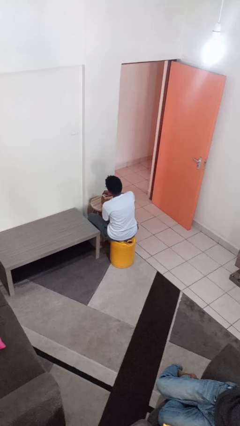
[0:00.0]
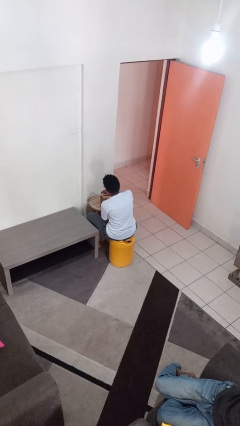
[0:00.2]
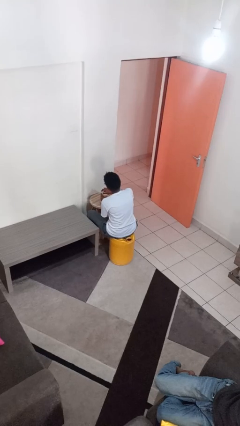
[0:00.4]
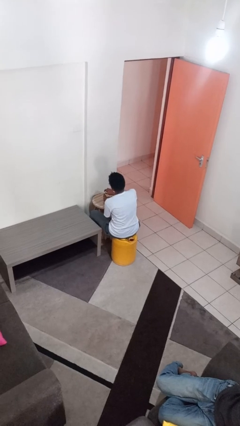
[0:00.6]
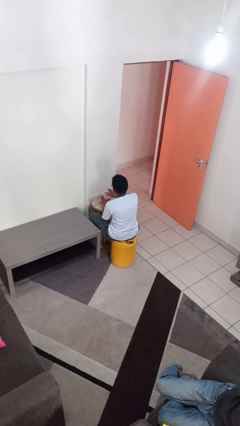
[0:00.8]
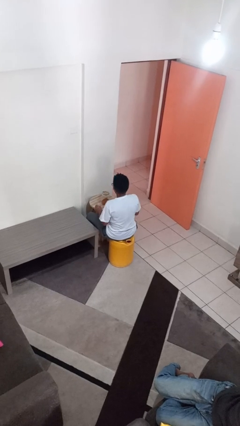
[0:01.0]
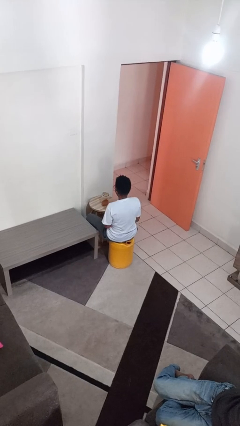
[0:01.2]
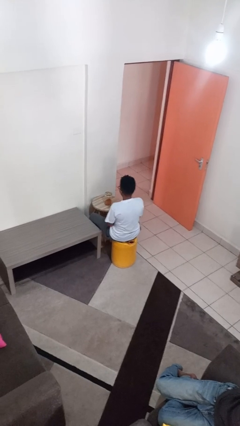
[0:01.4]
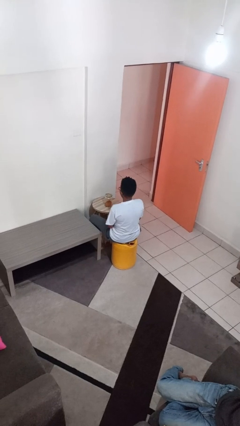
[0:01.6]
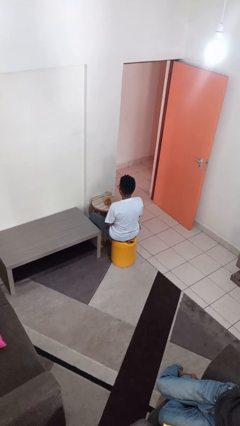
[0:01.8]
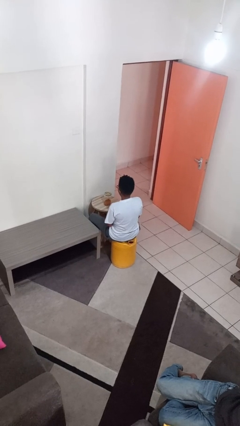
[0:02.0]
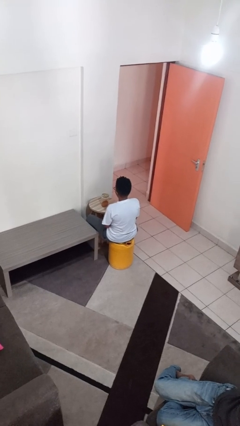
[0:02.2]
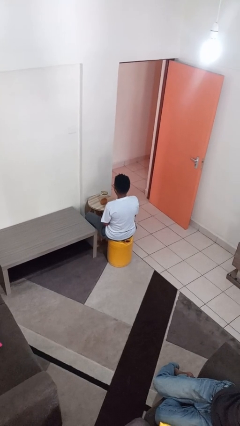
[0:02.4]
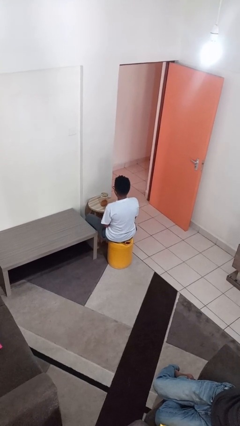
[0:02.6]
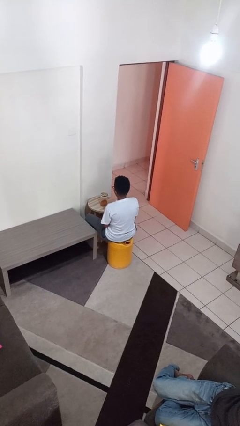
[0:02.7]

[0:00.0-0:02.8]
person closes jar

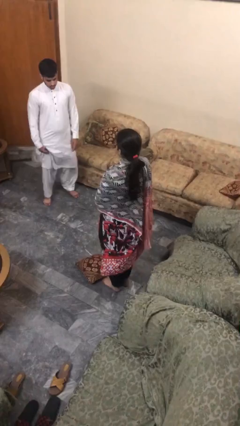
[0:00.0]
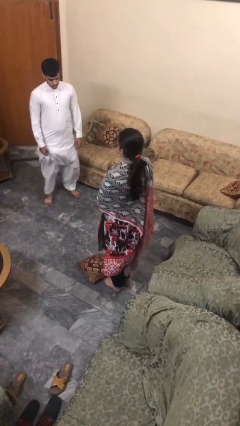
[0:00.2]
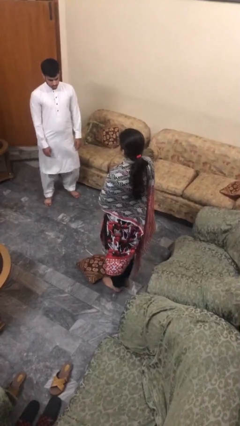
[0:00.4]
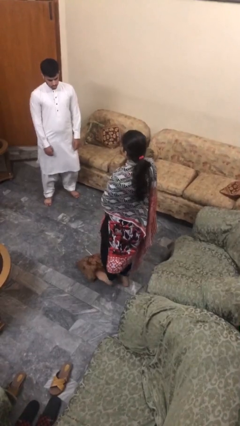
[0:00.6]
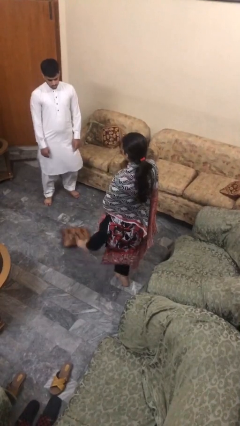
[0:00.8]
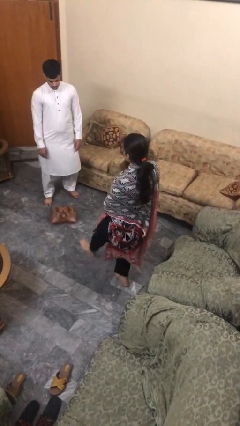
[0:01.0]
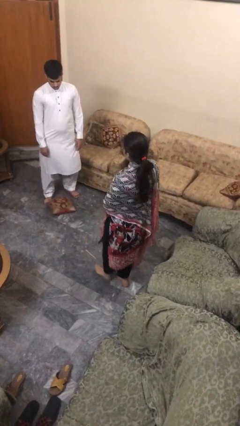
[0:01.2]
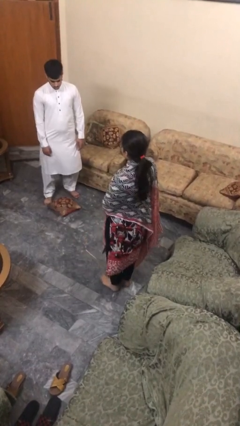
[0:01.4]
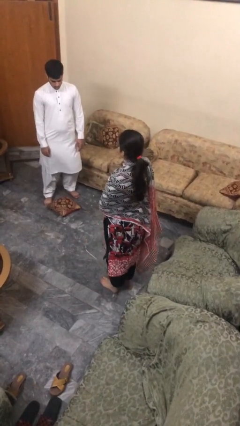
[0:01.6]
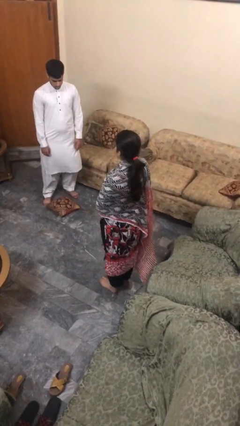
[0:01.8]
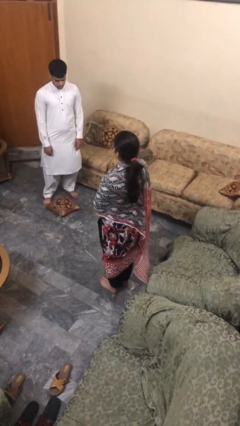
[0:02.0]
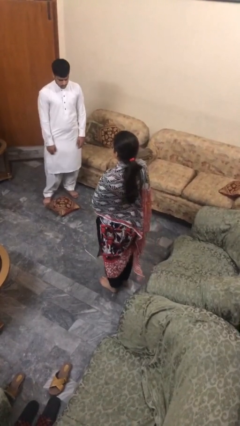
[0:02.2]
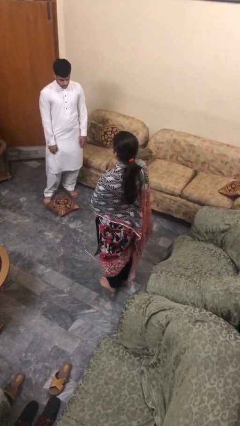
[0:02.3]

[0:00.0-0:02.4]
person kicks object to person

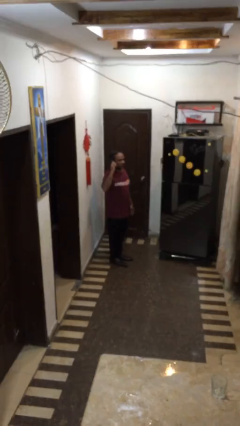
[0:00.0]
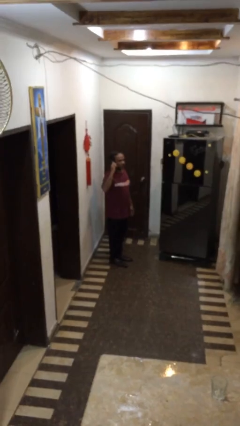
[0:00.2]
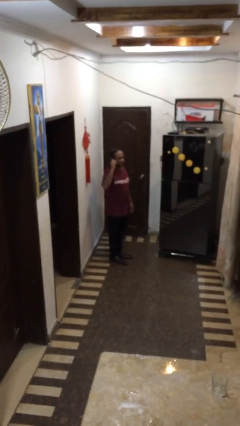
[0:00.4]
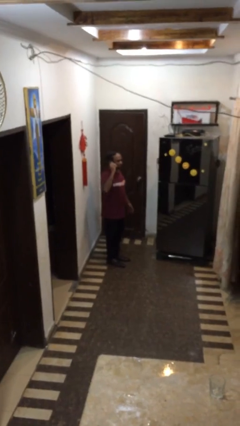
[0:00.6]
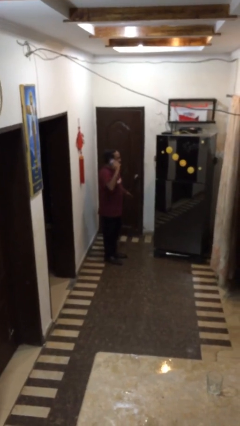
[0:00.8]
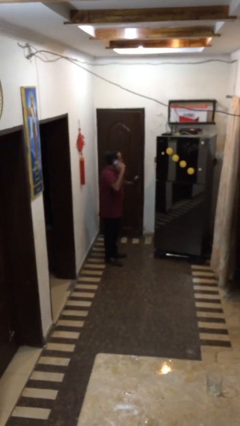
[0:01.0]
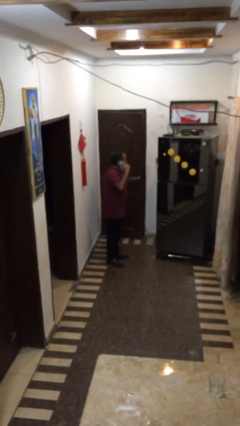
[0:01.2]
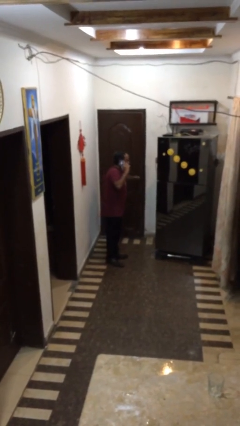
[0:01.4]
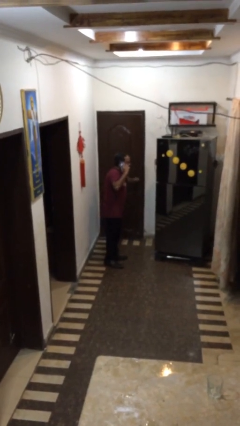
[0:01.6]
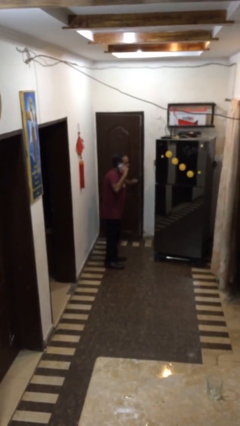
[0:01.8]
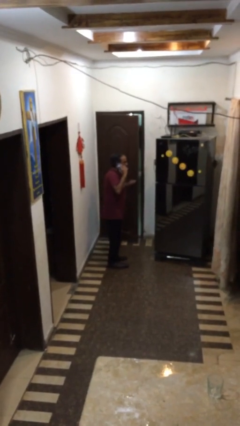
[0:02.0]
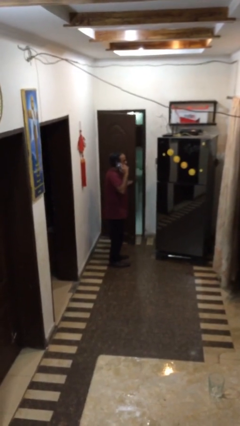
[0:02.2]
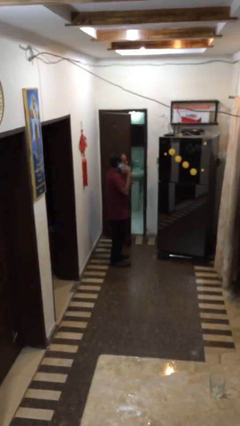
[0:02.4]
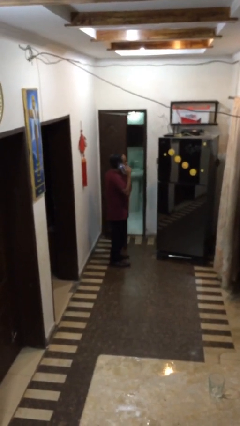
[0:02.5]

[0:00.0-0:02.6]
person opens facility door

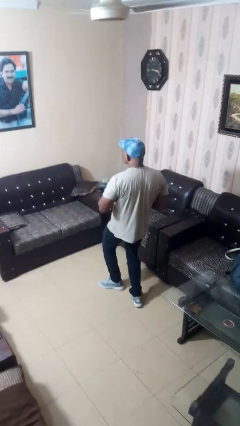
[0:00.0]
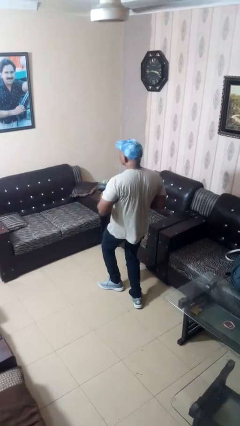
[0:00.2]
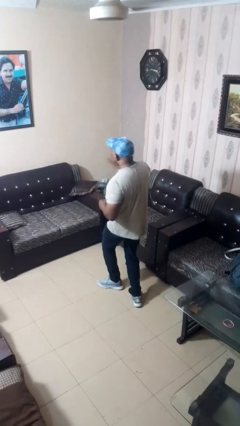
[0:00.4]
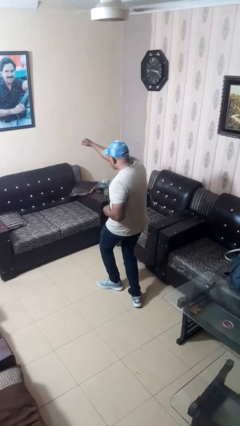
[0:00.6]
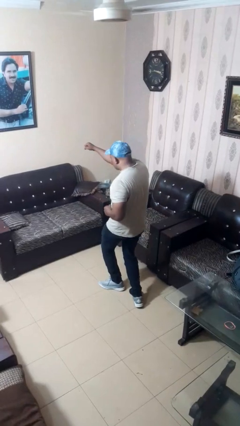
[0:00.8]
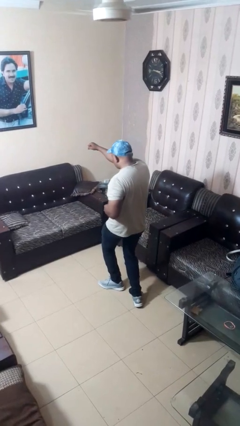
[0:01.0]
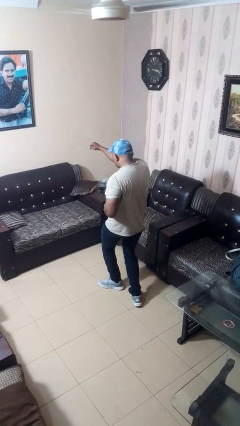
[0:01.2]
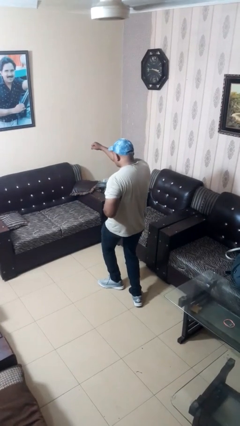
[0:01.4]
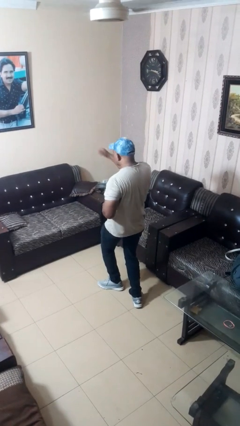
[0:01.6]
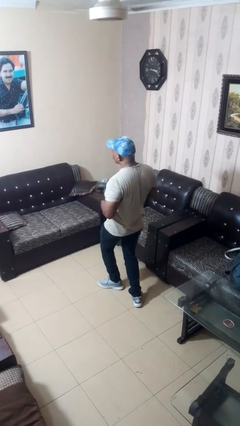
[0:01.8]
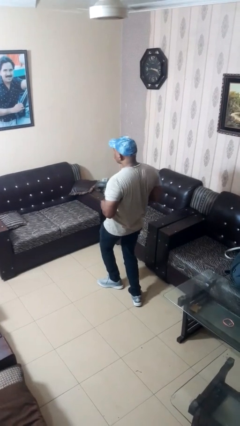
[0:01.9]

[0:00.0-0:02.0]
person karate chop

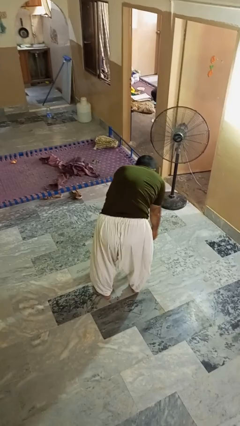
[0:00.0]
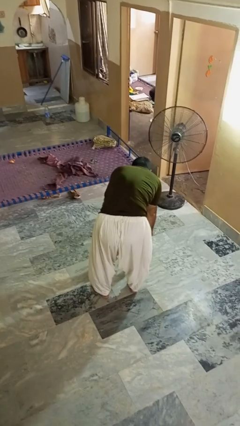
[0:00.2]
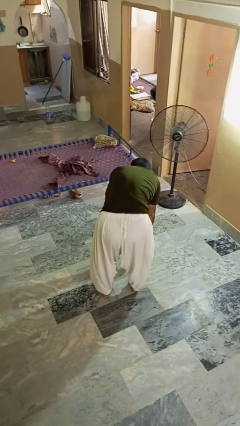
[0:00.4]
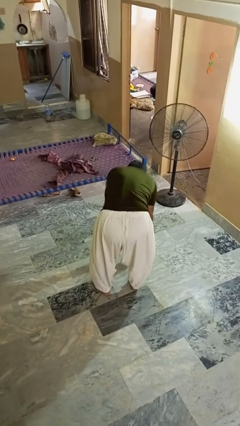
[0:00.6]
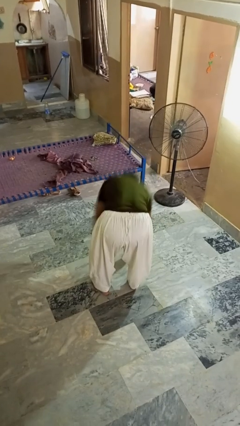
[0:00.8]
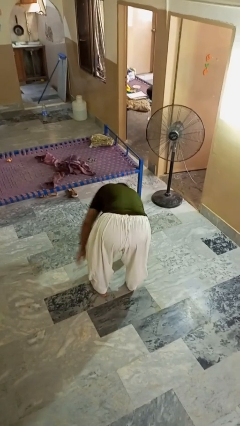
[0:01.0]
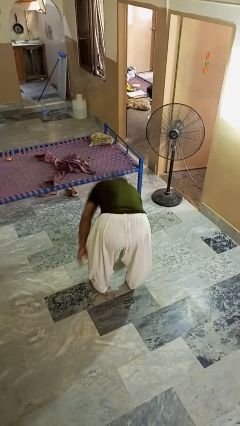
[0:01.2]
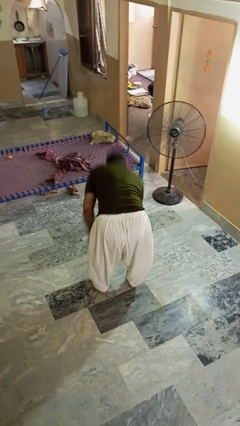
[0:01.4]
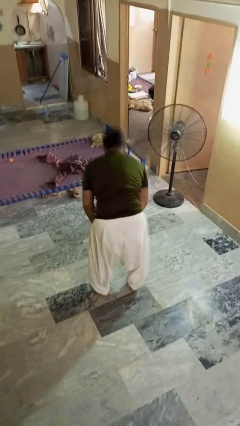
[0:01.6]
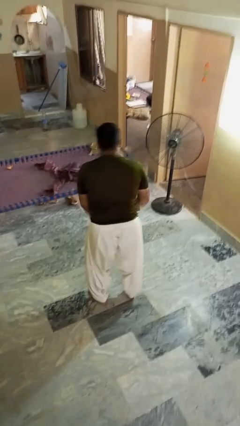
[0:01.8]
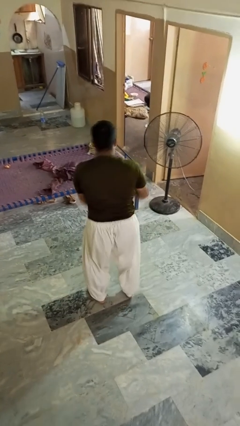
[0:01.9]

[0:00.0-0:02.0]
person picks up object from floor

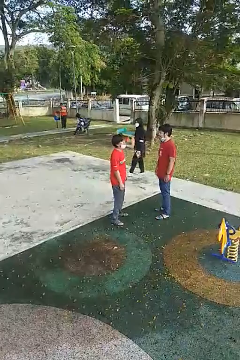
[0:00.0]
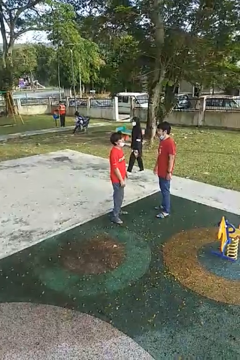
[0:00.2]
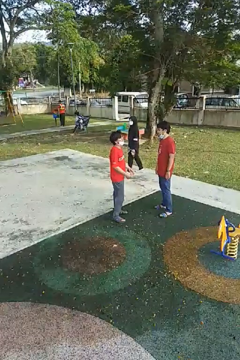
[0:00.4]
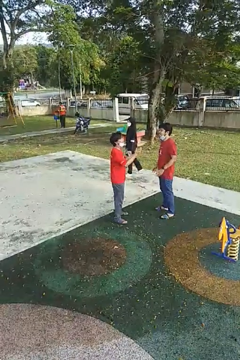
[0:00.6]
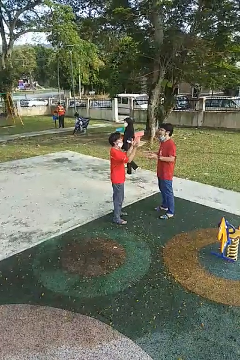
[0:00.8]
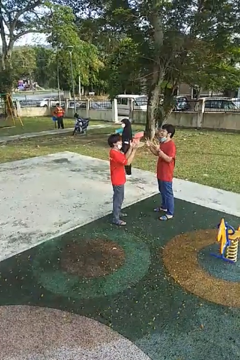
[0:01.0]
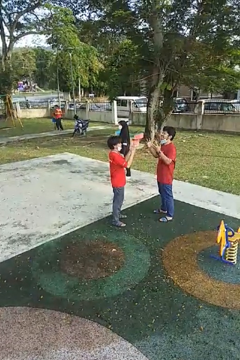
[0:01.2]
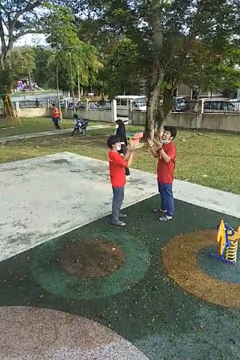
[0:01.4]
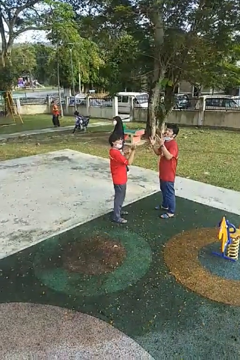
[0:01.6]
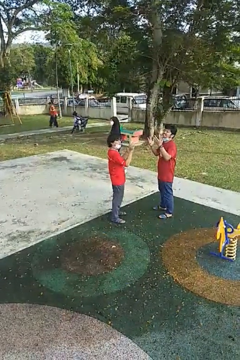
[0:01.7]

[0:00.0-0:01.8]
person talks to person

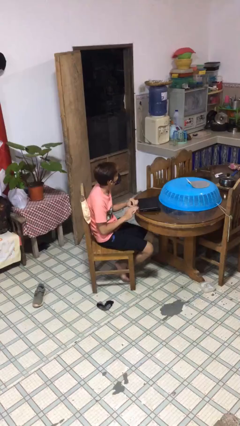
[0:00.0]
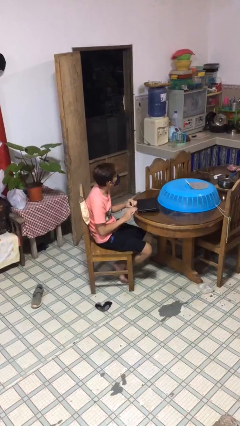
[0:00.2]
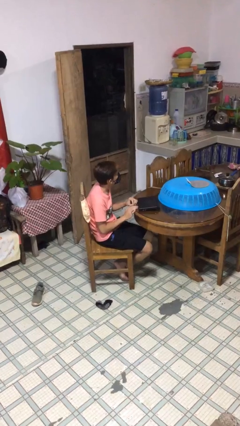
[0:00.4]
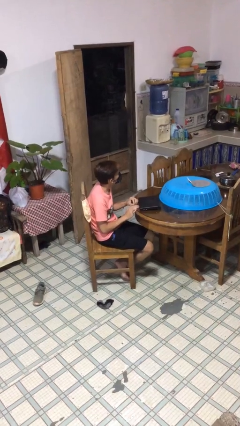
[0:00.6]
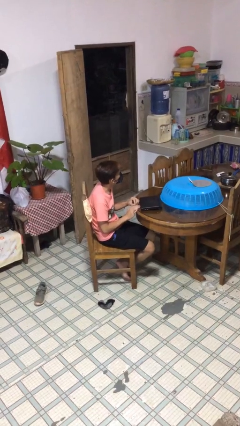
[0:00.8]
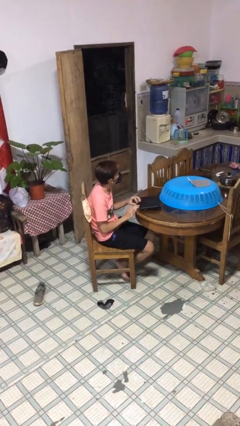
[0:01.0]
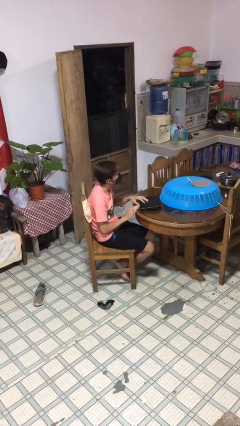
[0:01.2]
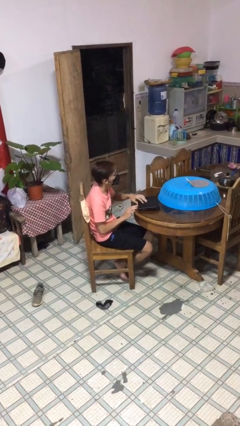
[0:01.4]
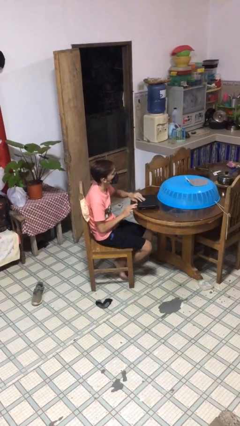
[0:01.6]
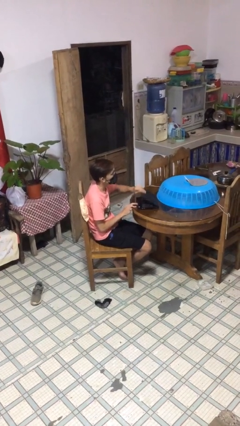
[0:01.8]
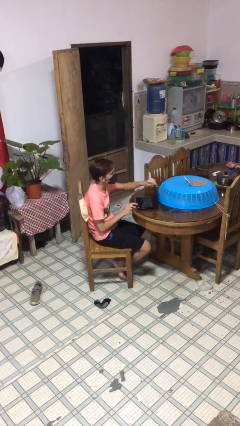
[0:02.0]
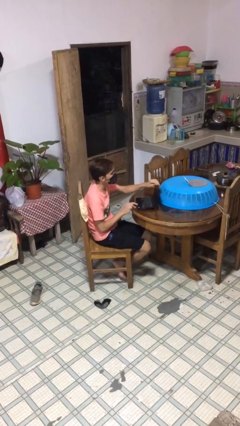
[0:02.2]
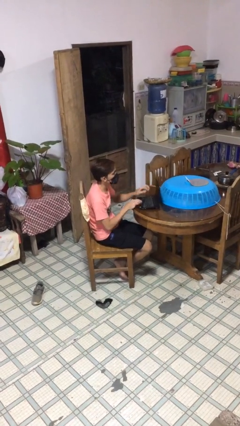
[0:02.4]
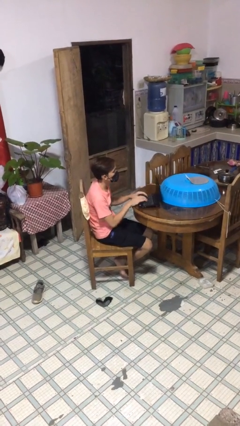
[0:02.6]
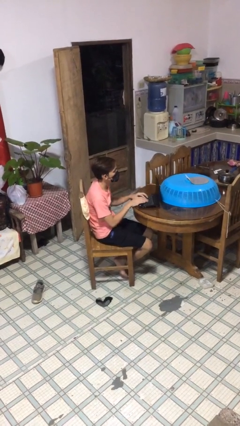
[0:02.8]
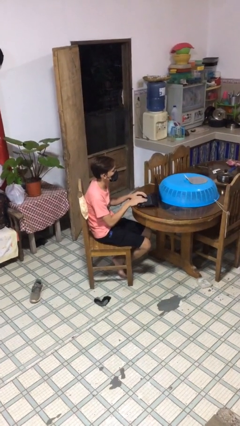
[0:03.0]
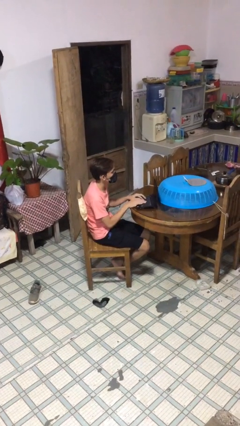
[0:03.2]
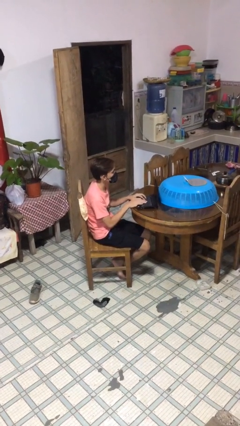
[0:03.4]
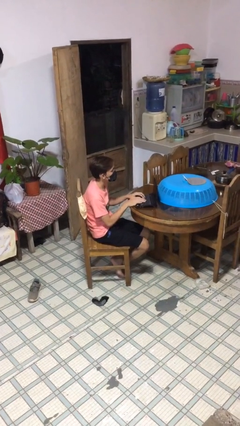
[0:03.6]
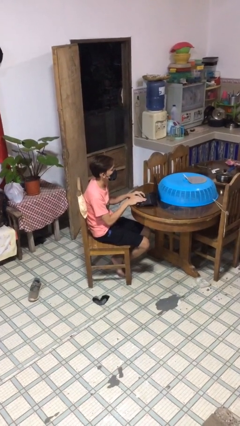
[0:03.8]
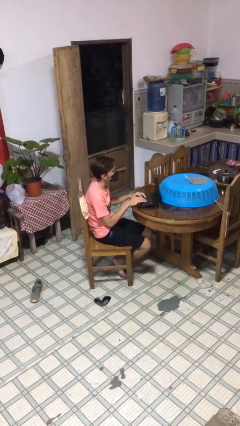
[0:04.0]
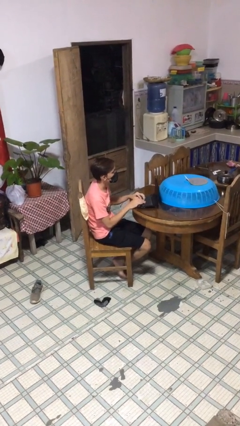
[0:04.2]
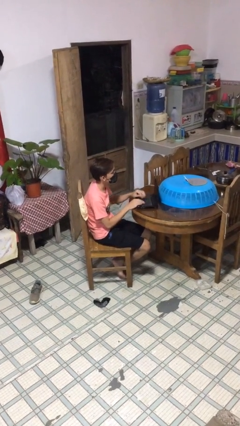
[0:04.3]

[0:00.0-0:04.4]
person interacts with laptop
